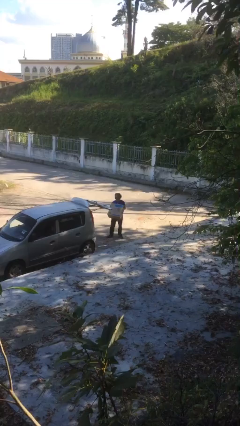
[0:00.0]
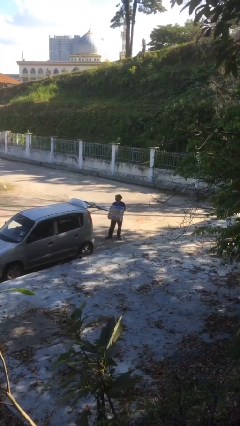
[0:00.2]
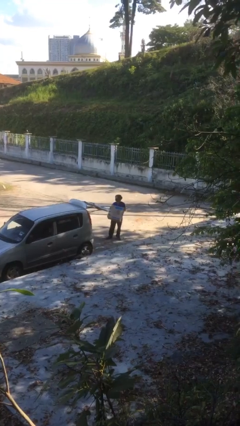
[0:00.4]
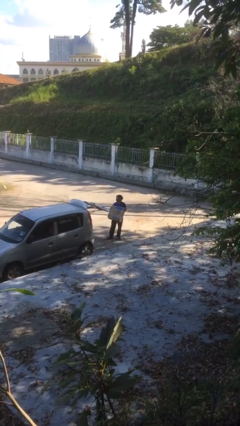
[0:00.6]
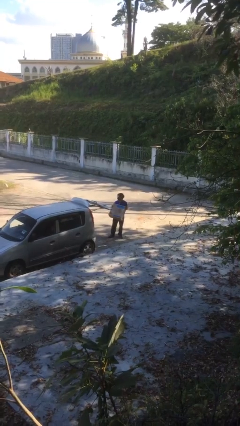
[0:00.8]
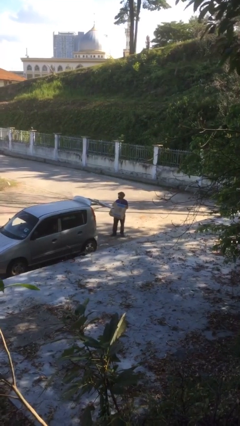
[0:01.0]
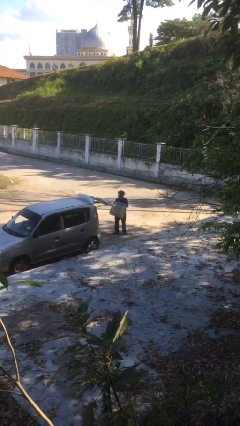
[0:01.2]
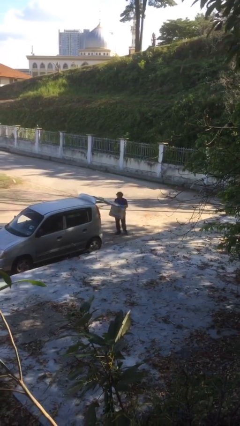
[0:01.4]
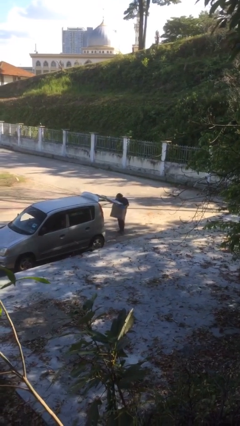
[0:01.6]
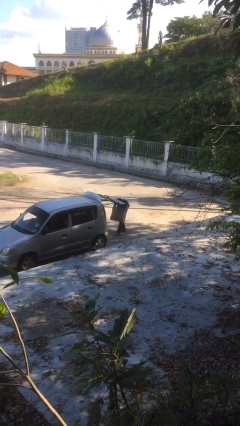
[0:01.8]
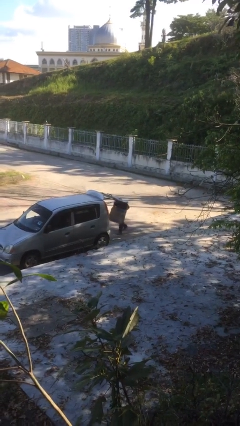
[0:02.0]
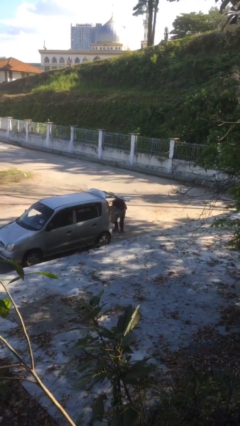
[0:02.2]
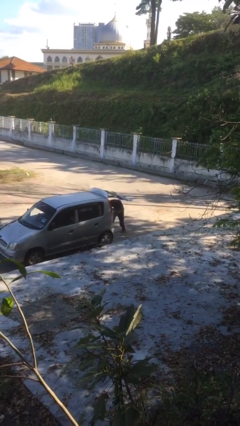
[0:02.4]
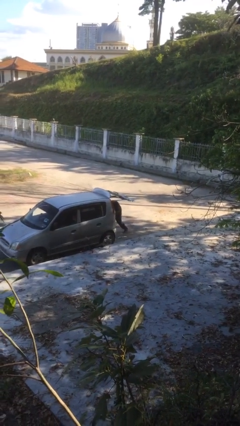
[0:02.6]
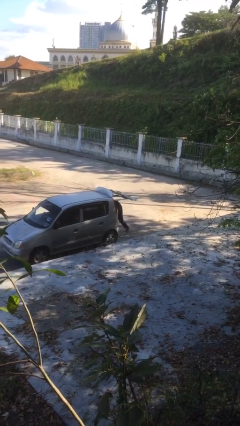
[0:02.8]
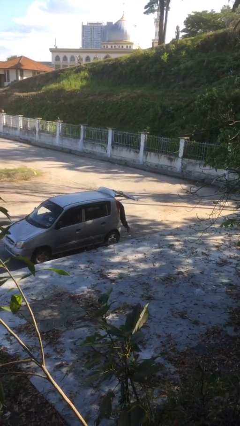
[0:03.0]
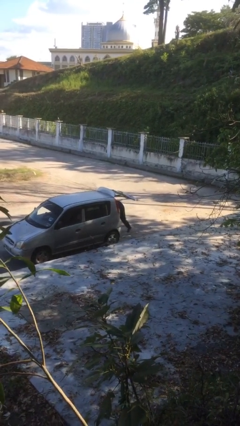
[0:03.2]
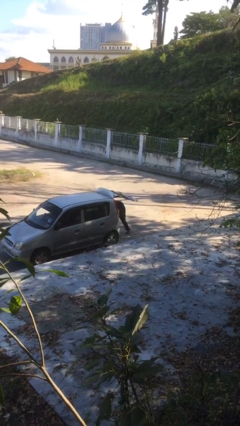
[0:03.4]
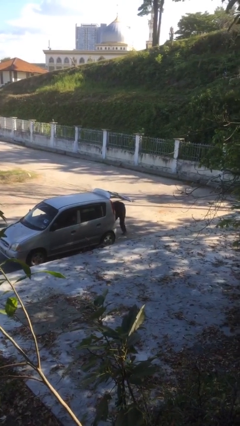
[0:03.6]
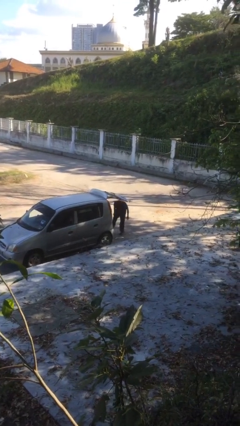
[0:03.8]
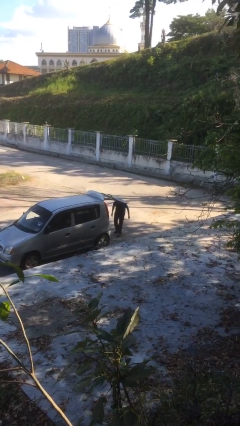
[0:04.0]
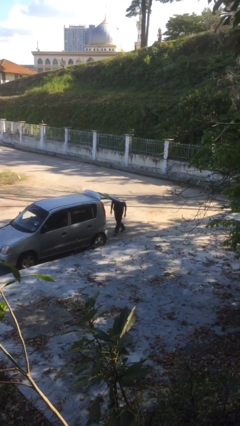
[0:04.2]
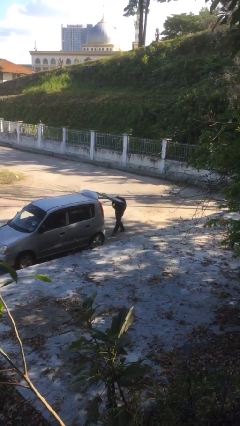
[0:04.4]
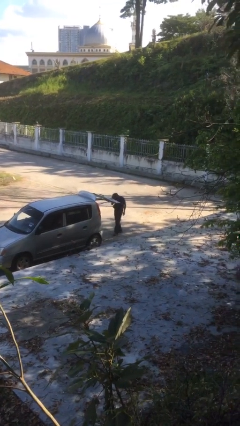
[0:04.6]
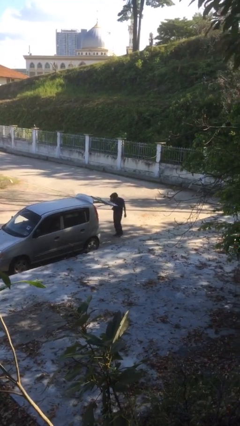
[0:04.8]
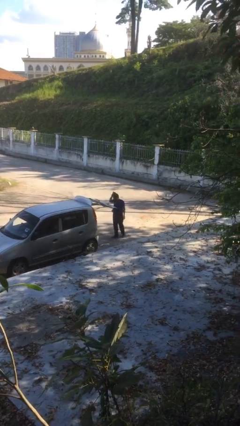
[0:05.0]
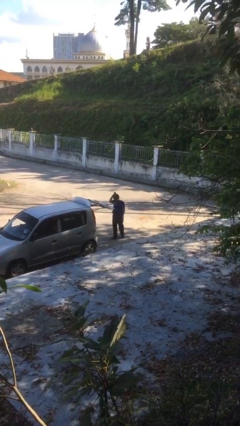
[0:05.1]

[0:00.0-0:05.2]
person loads car

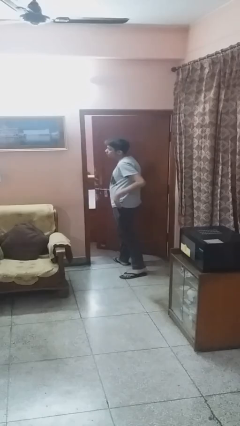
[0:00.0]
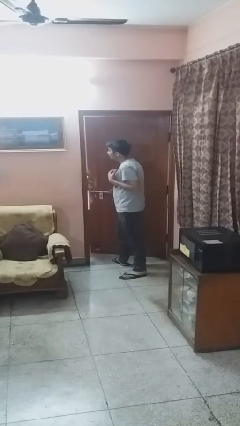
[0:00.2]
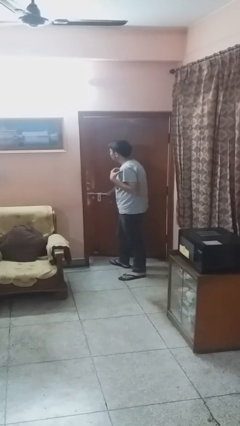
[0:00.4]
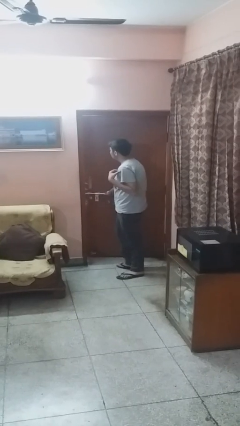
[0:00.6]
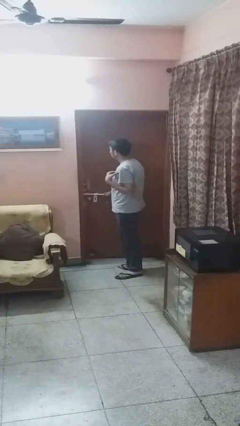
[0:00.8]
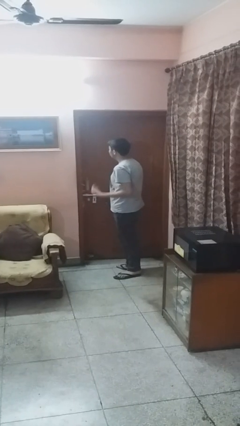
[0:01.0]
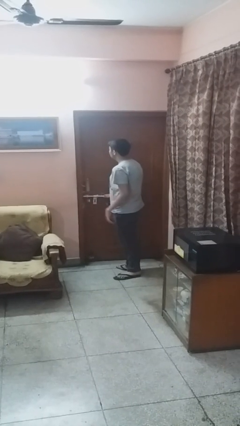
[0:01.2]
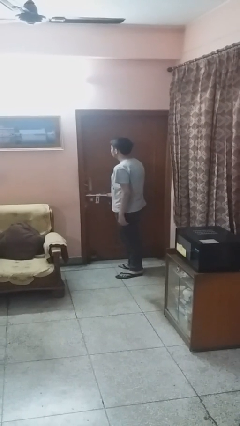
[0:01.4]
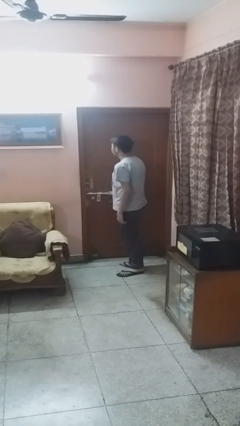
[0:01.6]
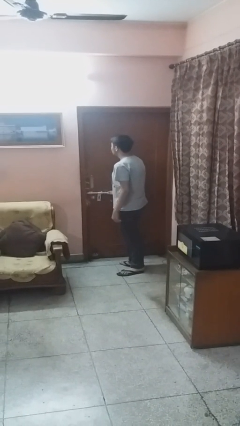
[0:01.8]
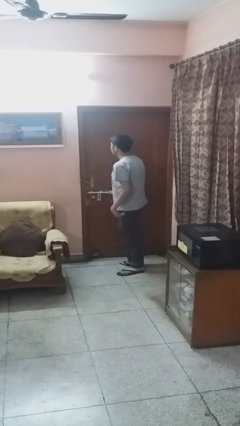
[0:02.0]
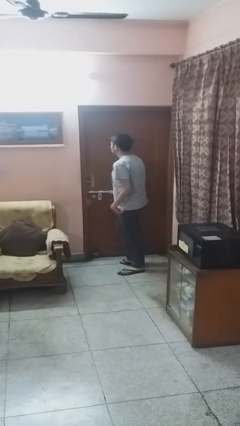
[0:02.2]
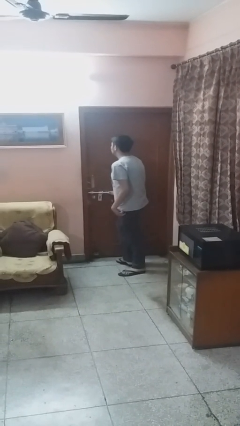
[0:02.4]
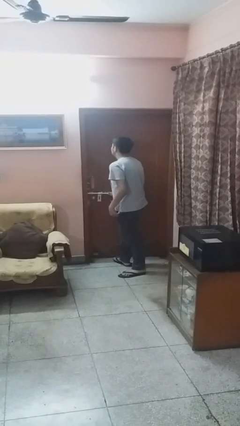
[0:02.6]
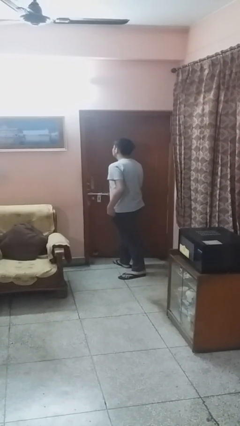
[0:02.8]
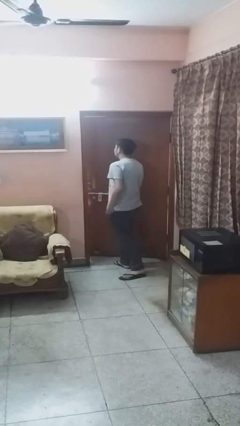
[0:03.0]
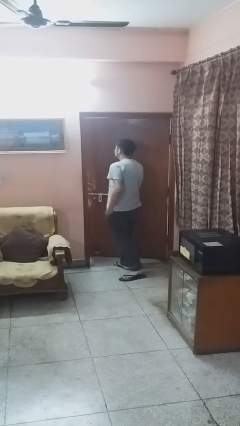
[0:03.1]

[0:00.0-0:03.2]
person closes facility door

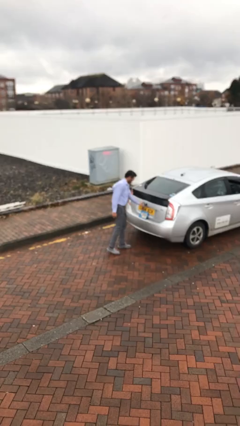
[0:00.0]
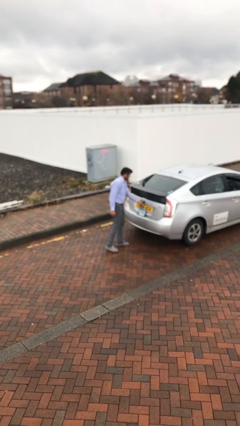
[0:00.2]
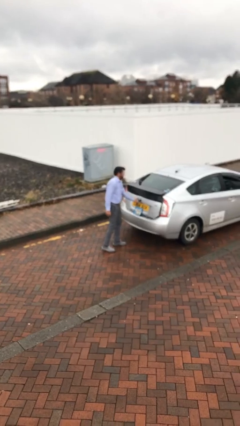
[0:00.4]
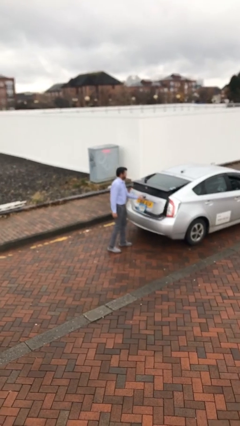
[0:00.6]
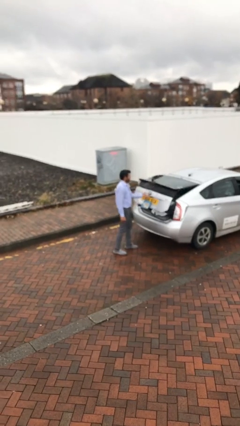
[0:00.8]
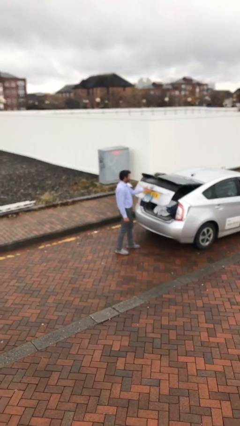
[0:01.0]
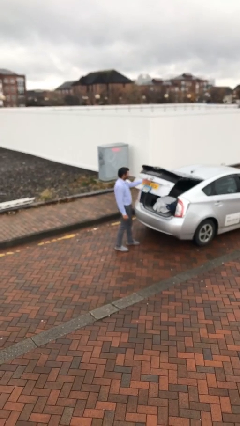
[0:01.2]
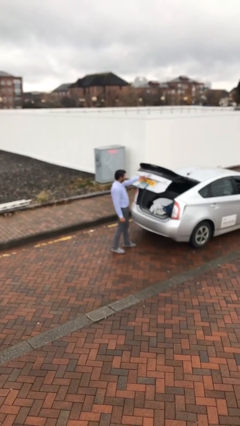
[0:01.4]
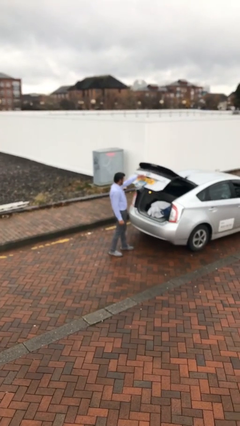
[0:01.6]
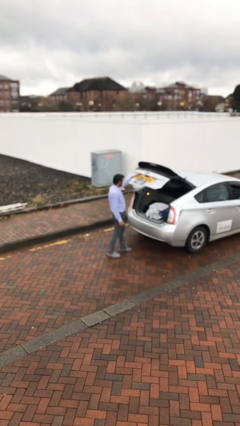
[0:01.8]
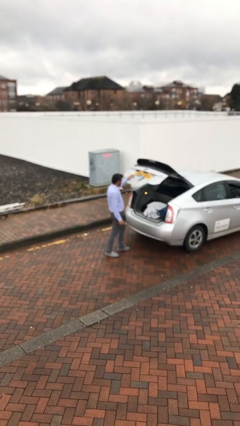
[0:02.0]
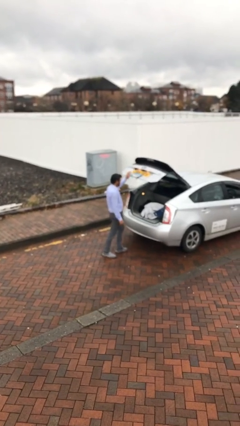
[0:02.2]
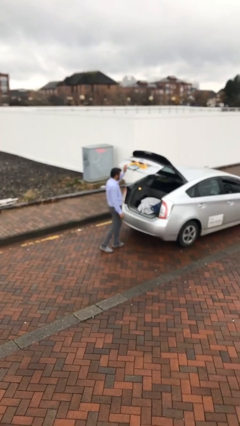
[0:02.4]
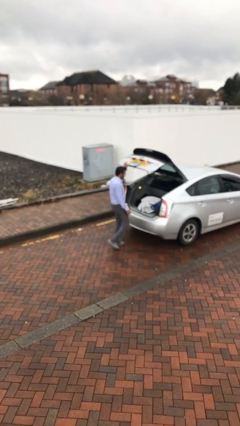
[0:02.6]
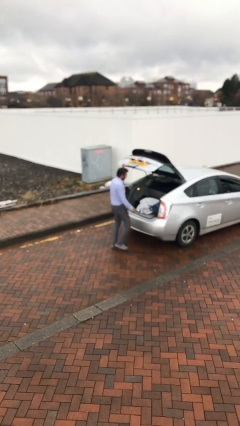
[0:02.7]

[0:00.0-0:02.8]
person opens car trunk

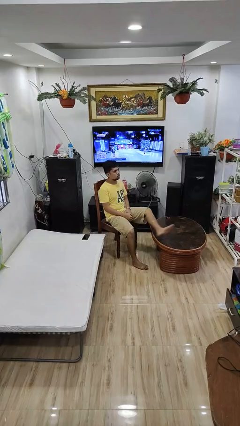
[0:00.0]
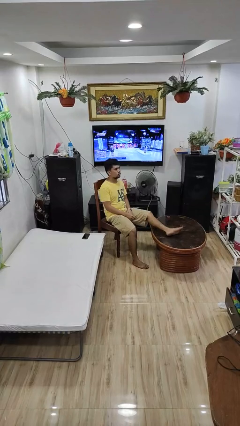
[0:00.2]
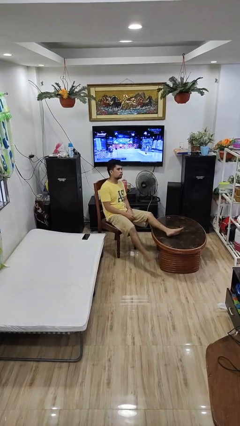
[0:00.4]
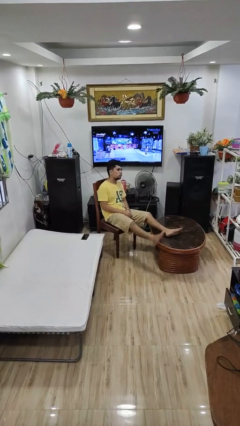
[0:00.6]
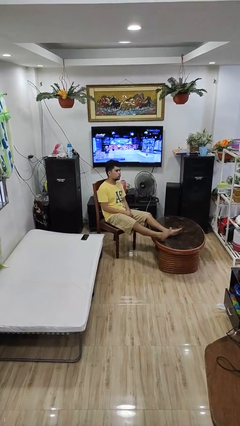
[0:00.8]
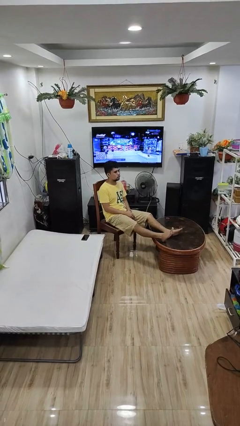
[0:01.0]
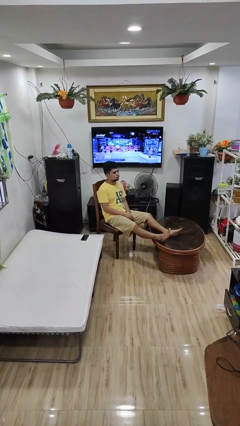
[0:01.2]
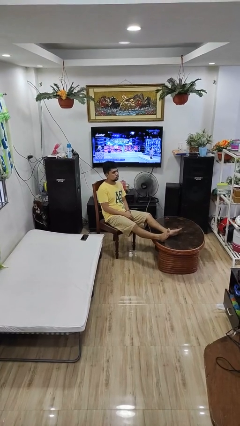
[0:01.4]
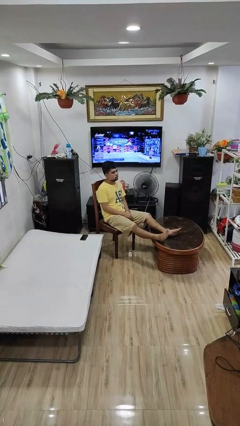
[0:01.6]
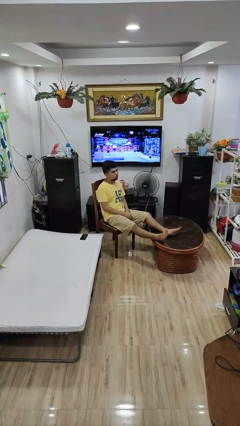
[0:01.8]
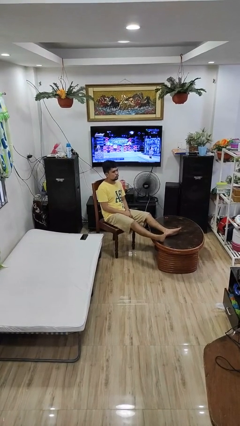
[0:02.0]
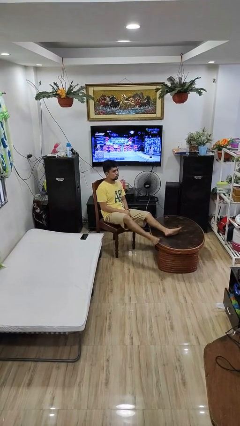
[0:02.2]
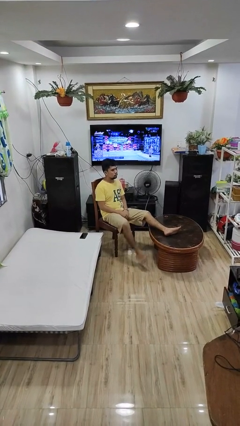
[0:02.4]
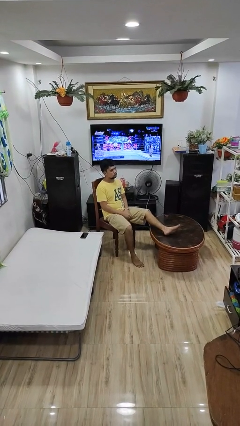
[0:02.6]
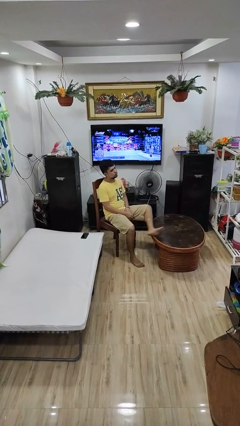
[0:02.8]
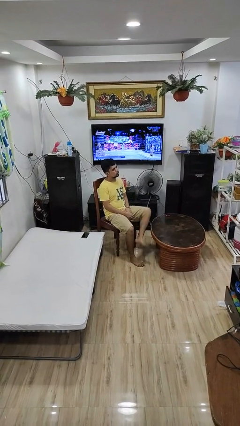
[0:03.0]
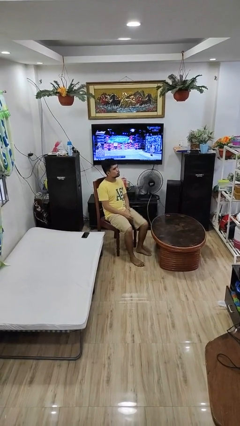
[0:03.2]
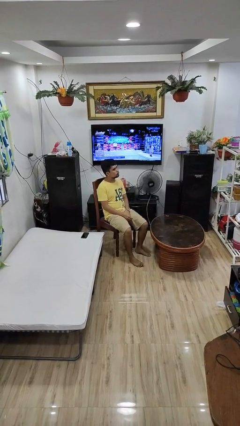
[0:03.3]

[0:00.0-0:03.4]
person puts feet up

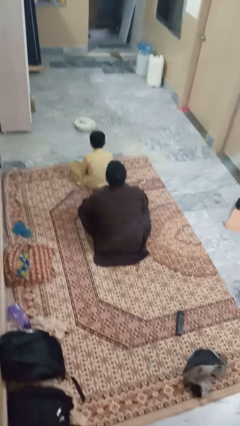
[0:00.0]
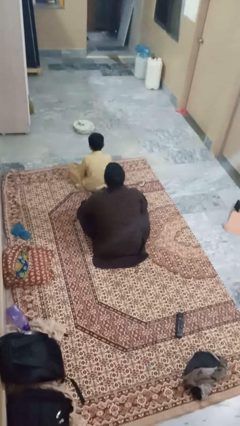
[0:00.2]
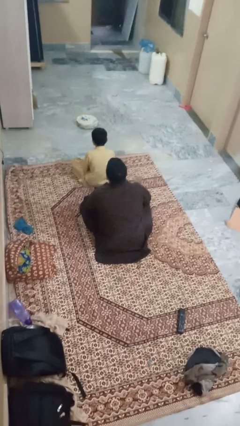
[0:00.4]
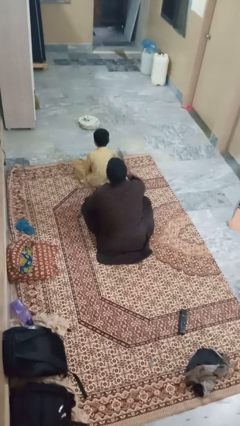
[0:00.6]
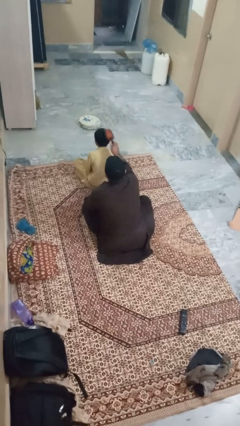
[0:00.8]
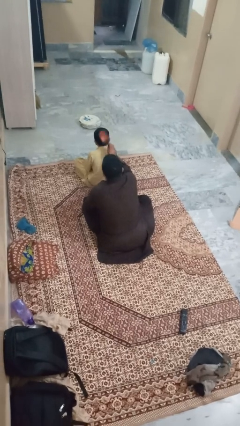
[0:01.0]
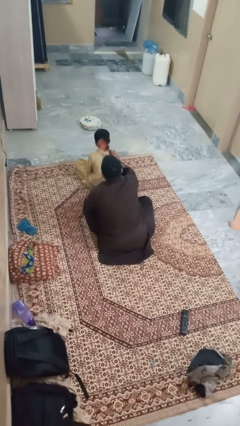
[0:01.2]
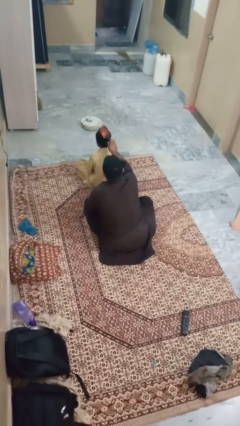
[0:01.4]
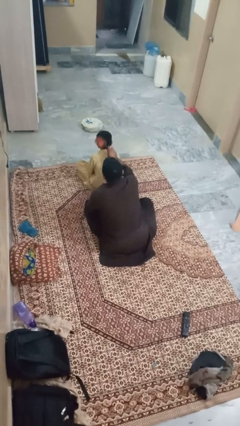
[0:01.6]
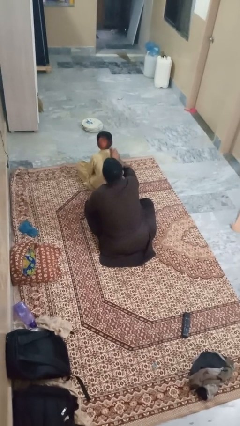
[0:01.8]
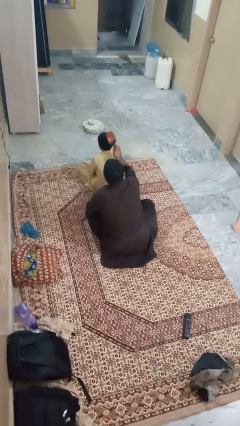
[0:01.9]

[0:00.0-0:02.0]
person brushes hair of person

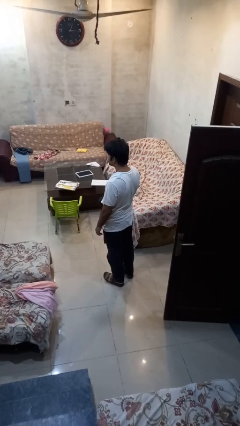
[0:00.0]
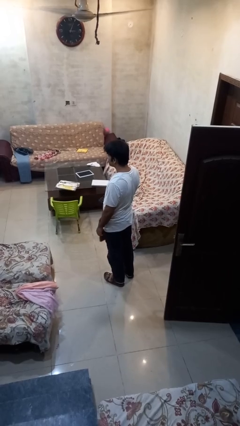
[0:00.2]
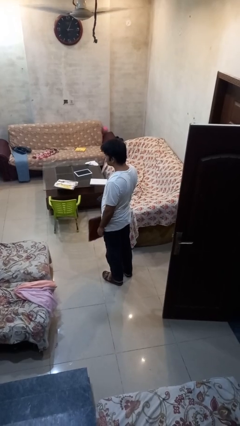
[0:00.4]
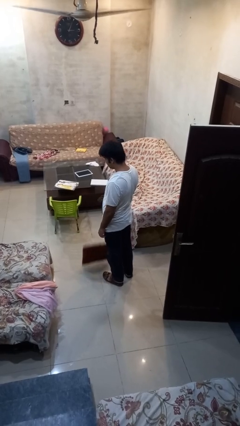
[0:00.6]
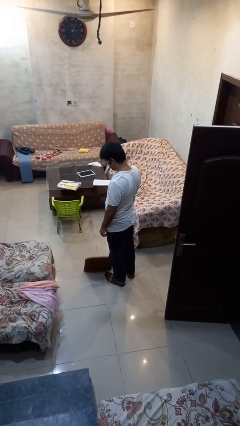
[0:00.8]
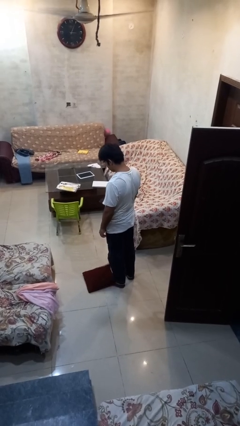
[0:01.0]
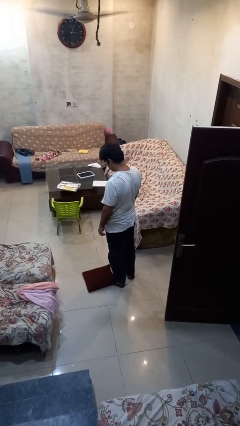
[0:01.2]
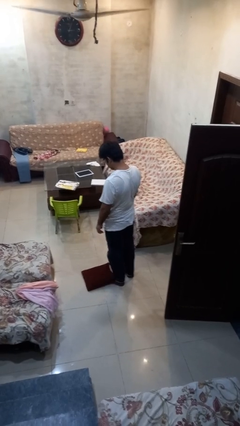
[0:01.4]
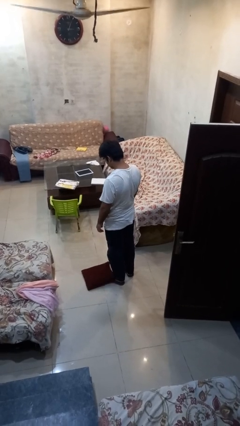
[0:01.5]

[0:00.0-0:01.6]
person drops object
